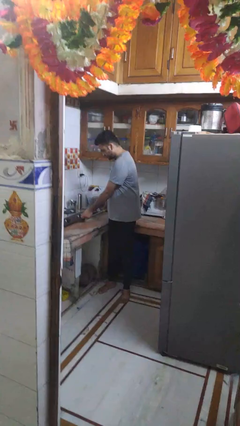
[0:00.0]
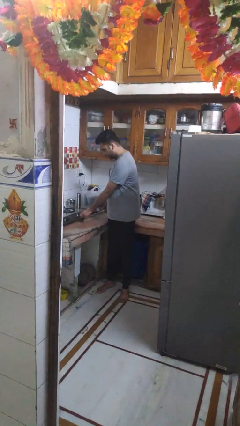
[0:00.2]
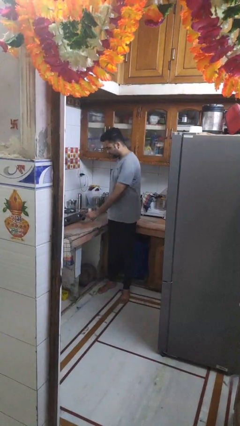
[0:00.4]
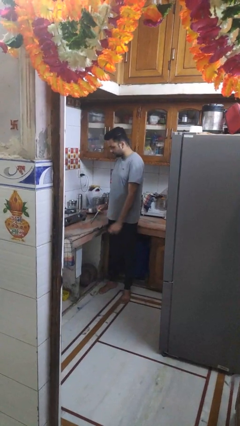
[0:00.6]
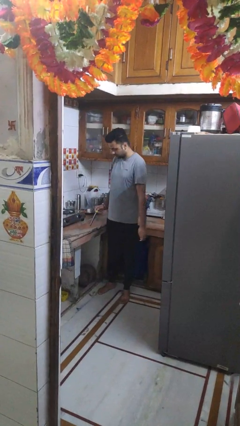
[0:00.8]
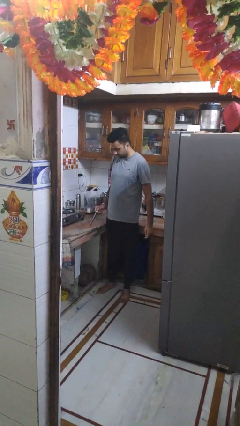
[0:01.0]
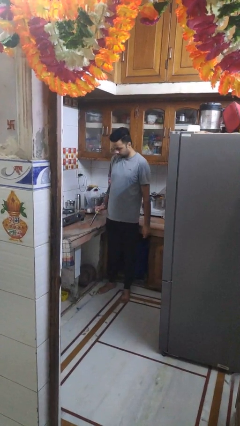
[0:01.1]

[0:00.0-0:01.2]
person turns off stovetop

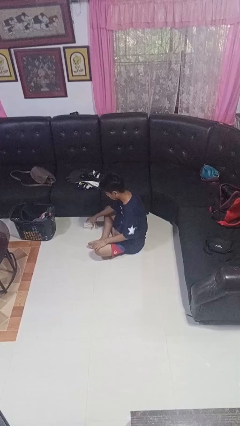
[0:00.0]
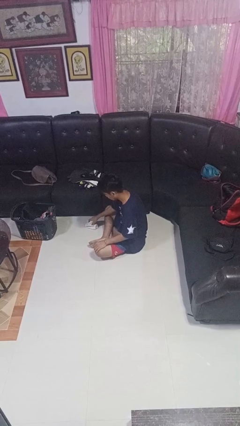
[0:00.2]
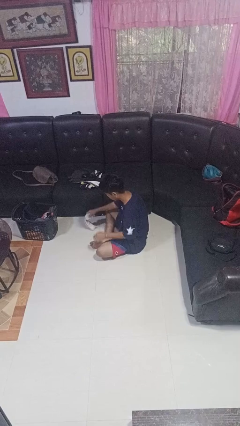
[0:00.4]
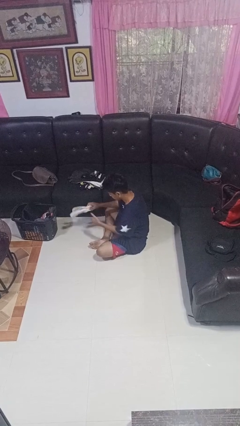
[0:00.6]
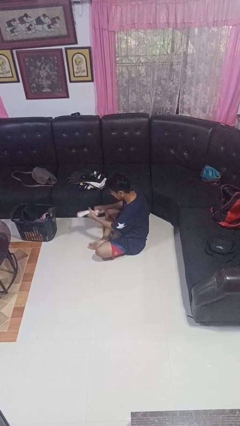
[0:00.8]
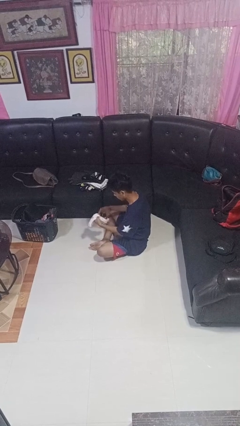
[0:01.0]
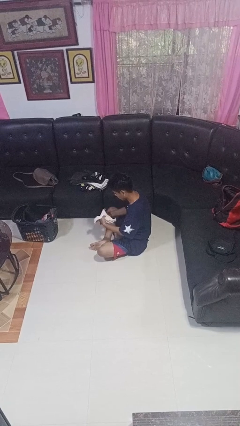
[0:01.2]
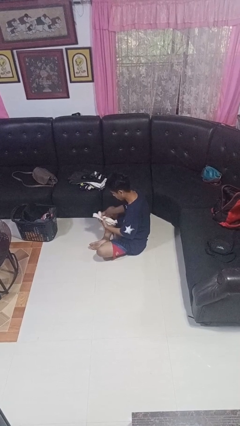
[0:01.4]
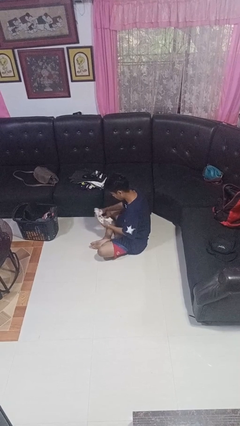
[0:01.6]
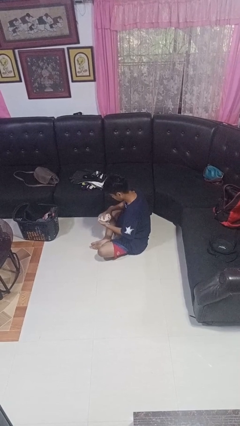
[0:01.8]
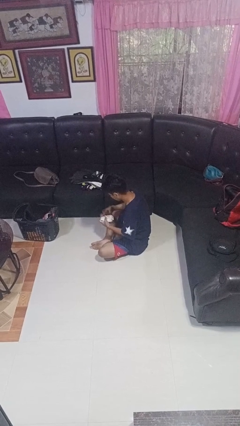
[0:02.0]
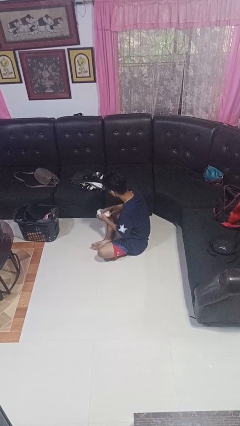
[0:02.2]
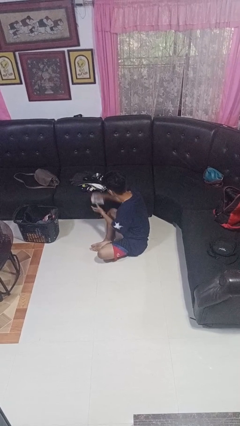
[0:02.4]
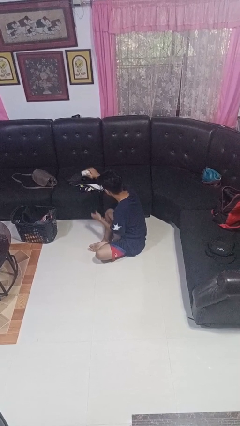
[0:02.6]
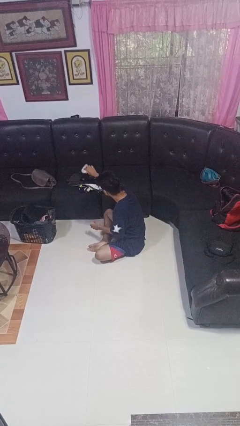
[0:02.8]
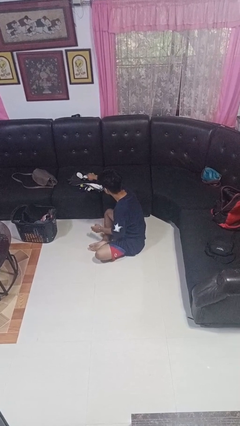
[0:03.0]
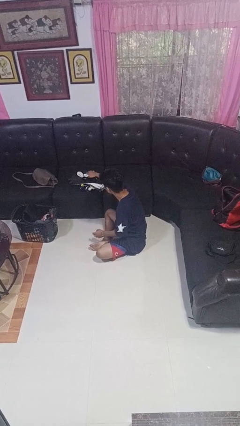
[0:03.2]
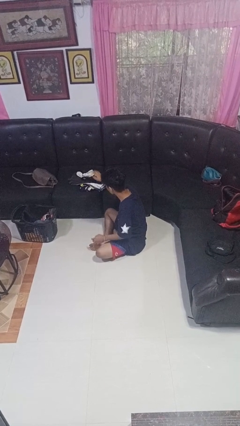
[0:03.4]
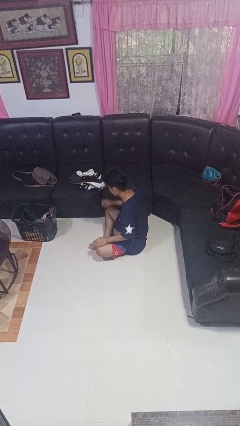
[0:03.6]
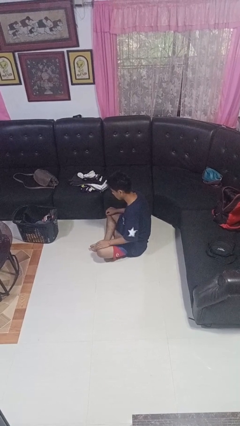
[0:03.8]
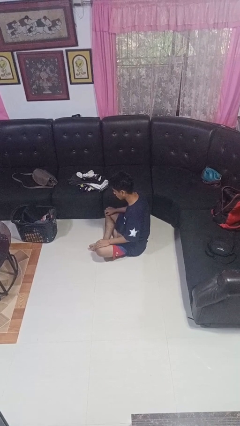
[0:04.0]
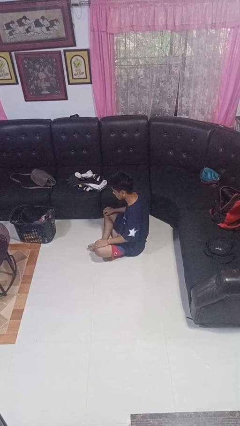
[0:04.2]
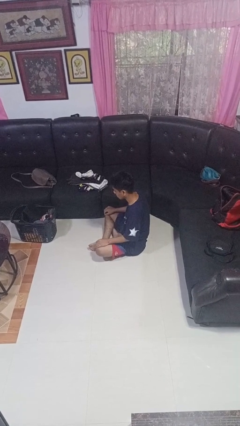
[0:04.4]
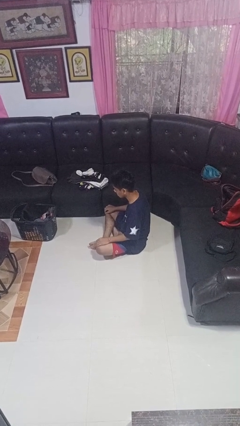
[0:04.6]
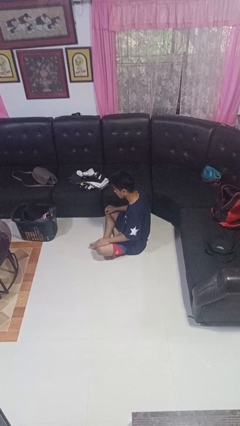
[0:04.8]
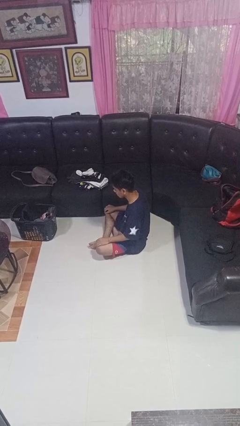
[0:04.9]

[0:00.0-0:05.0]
person folds socks

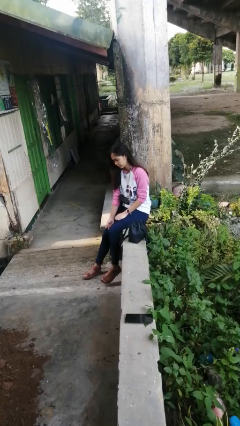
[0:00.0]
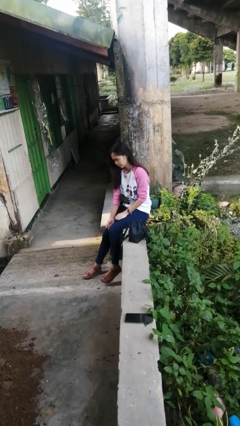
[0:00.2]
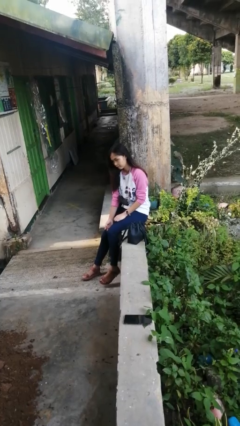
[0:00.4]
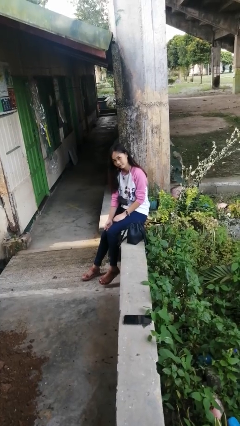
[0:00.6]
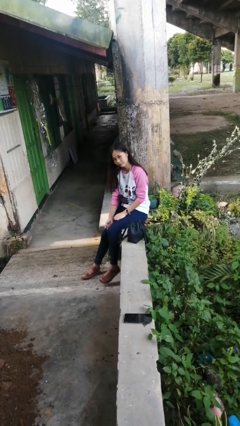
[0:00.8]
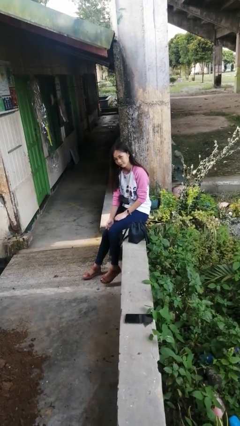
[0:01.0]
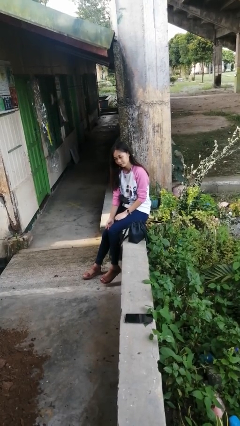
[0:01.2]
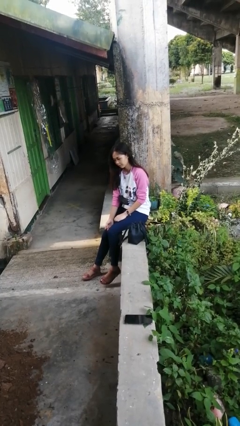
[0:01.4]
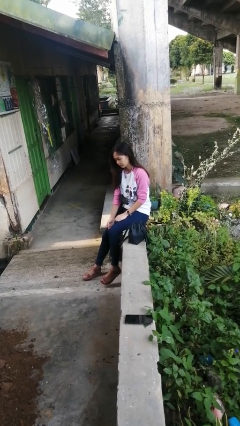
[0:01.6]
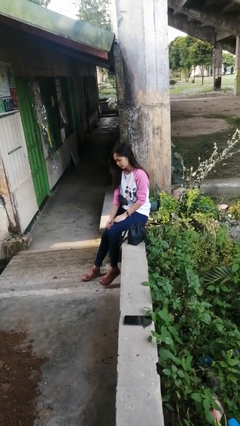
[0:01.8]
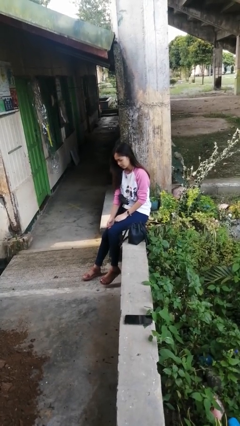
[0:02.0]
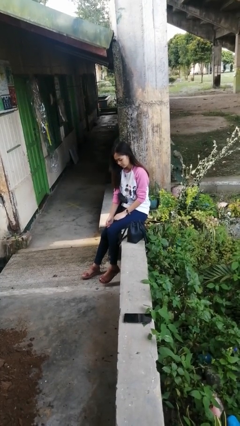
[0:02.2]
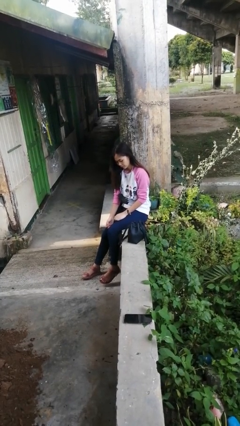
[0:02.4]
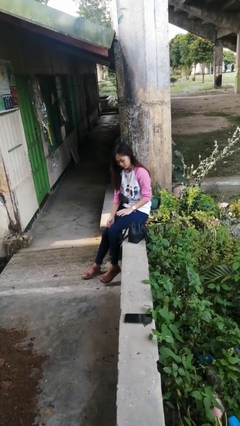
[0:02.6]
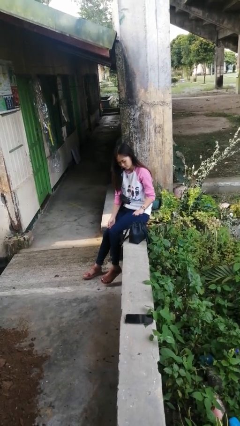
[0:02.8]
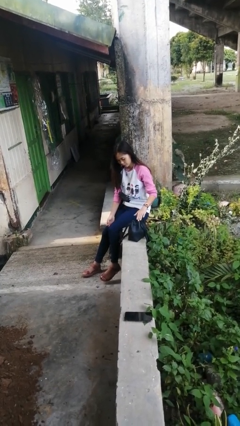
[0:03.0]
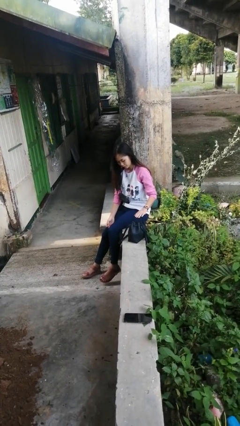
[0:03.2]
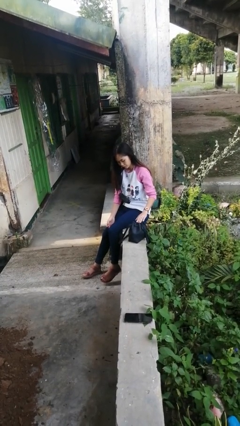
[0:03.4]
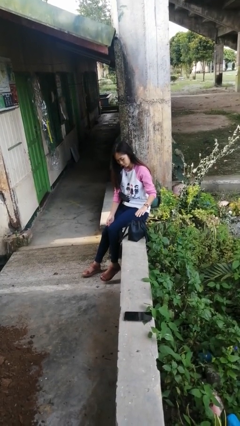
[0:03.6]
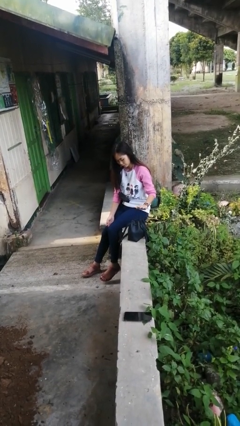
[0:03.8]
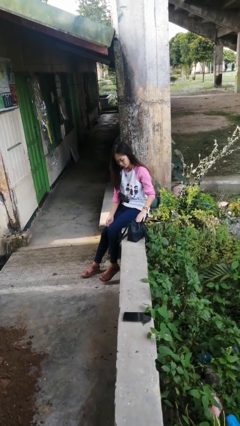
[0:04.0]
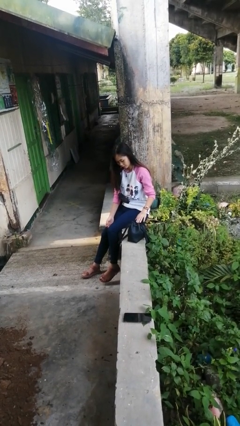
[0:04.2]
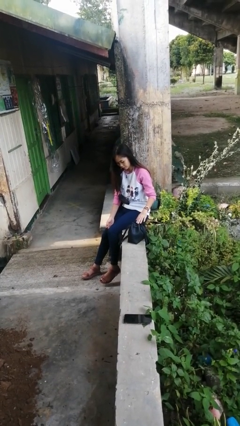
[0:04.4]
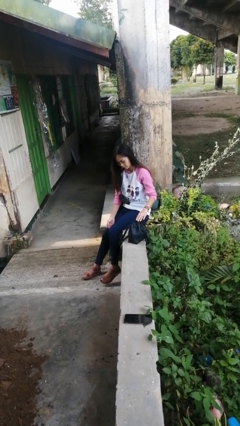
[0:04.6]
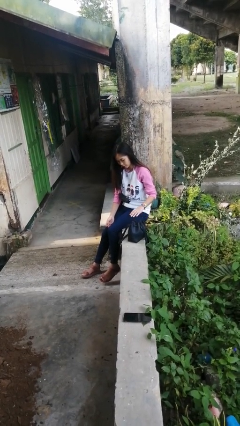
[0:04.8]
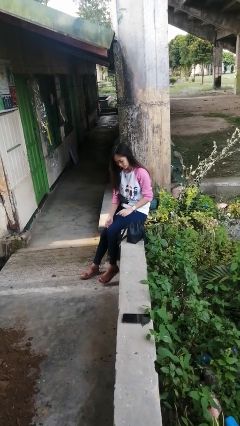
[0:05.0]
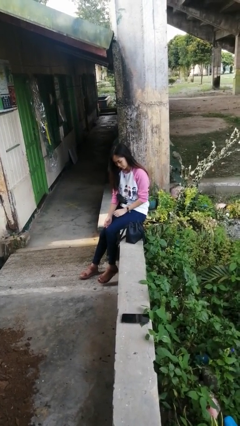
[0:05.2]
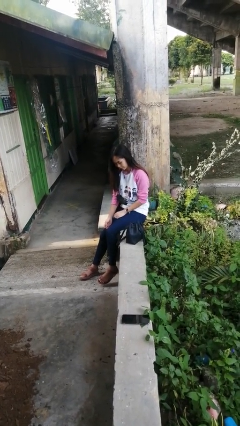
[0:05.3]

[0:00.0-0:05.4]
person taps object with finger

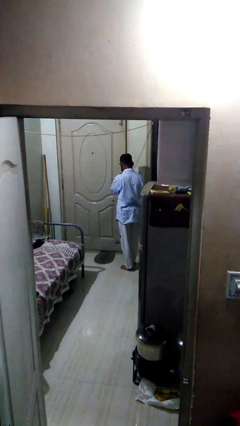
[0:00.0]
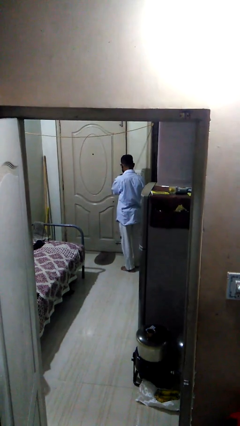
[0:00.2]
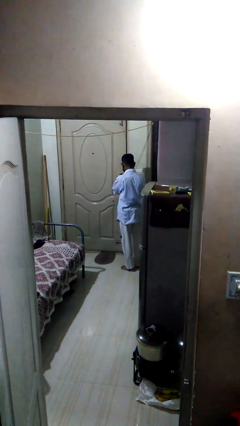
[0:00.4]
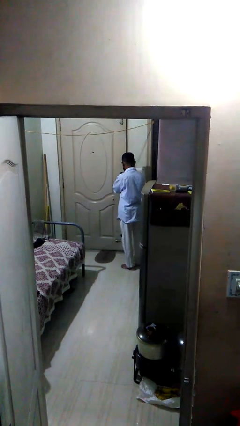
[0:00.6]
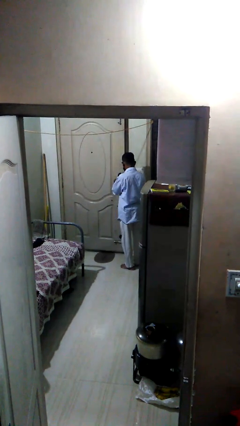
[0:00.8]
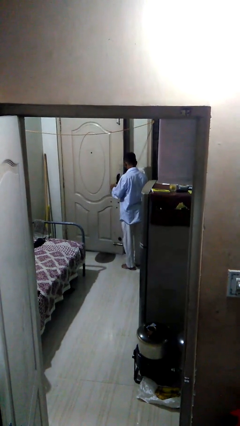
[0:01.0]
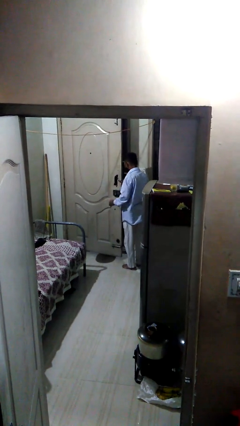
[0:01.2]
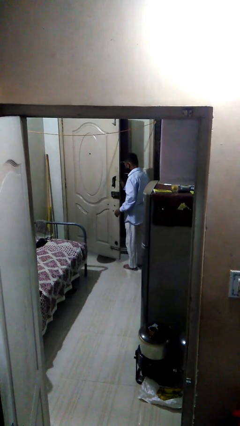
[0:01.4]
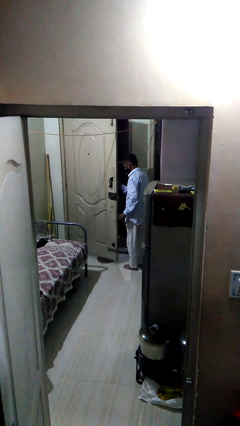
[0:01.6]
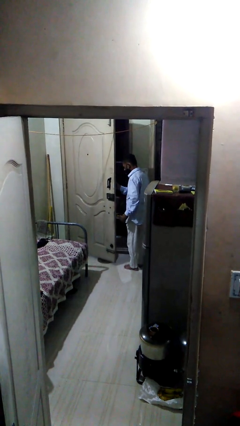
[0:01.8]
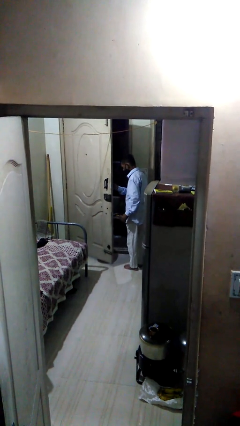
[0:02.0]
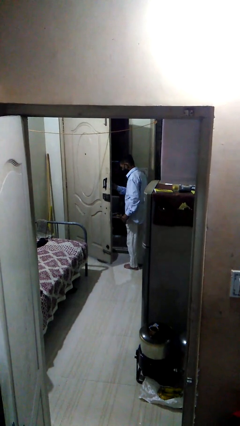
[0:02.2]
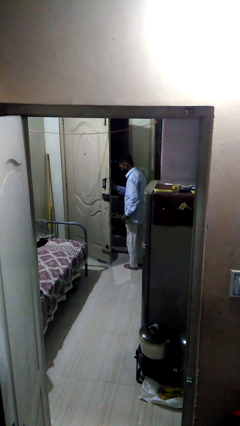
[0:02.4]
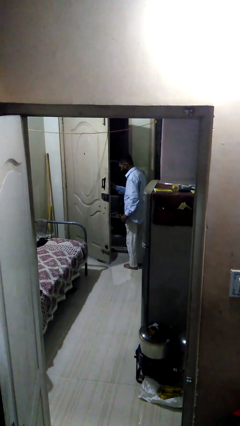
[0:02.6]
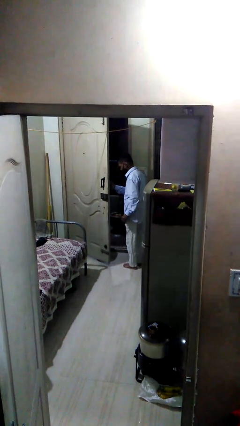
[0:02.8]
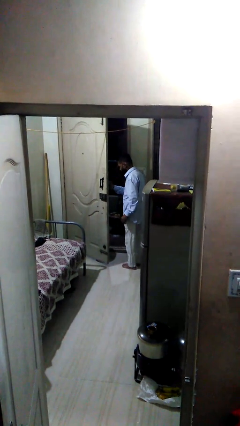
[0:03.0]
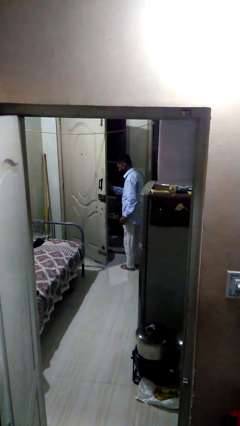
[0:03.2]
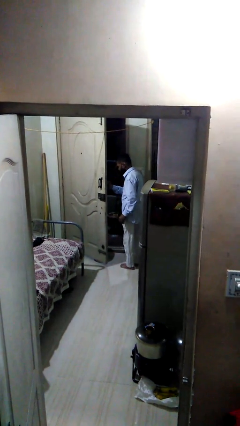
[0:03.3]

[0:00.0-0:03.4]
person opens facility door

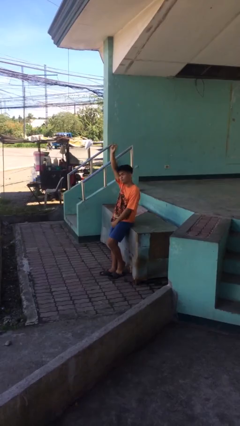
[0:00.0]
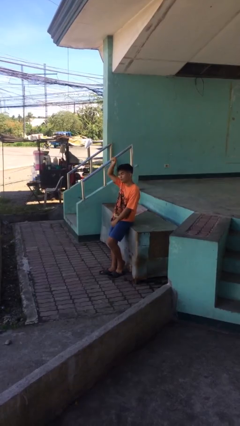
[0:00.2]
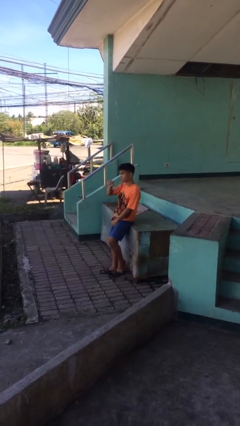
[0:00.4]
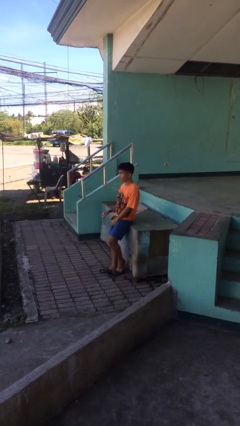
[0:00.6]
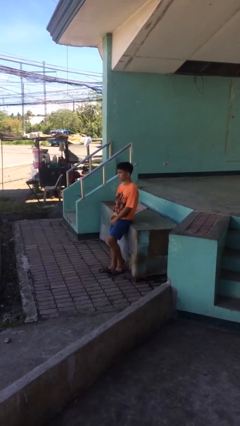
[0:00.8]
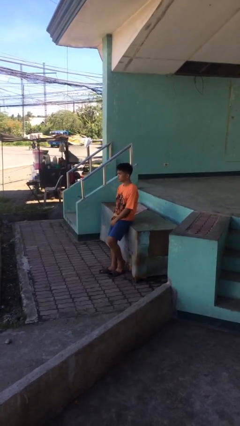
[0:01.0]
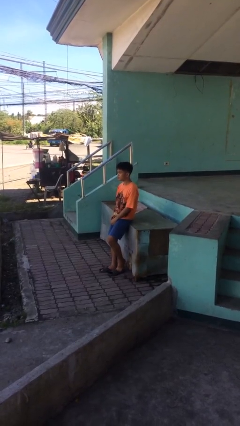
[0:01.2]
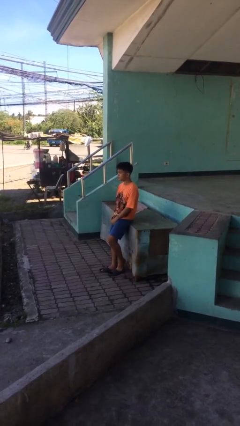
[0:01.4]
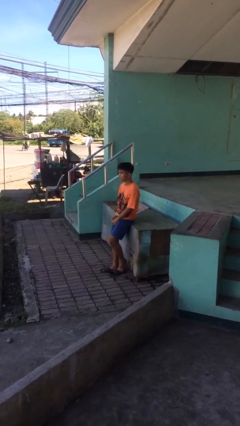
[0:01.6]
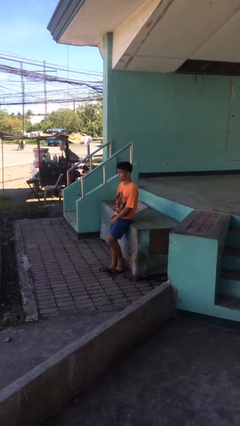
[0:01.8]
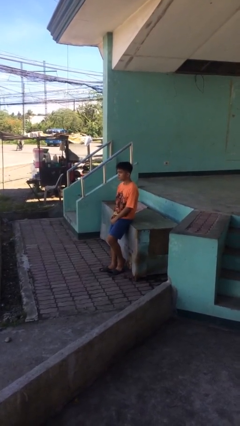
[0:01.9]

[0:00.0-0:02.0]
person gestures lower hand

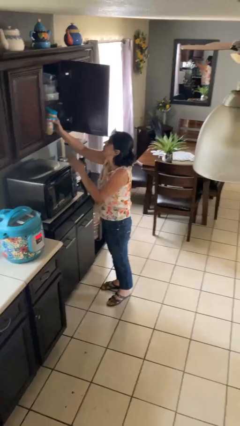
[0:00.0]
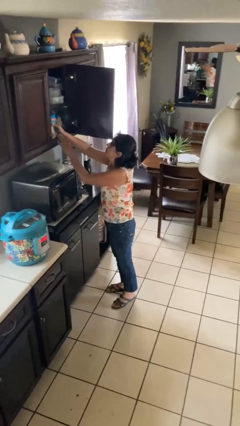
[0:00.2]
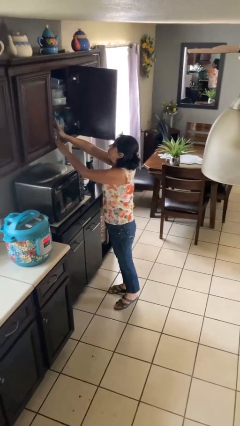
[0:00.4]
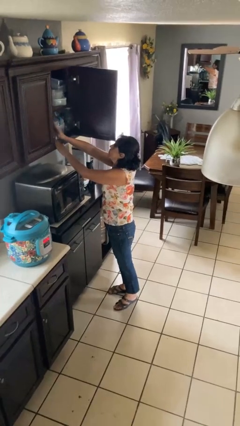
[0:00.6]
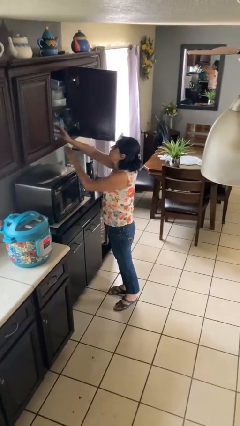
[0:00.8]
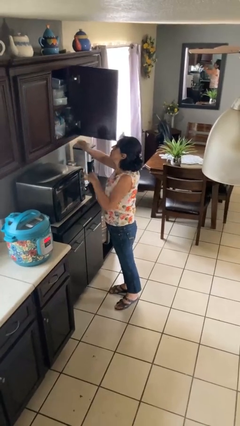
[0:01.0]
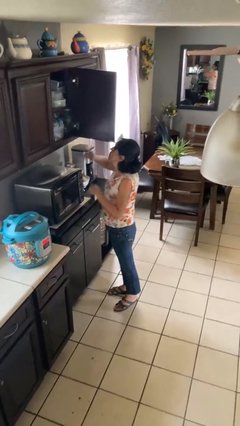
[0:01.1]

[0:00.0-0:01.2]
person puts down object into cabinet
